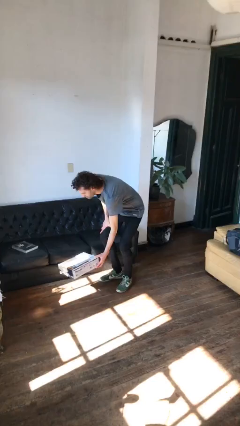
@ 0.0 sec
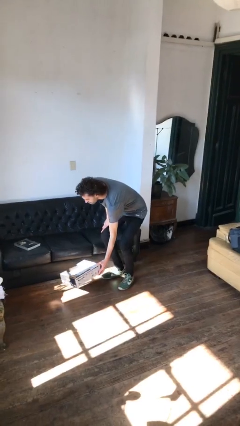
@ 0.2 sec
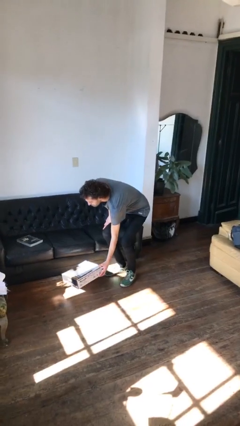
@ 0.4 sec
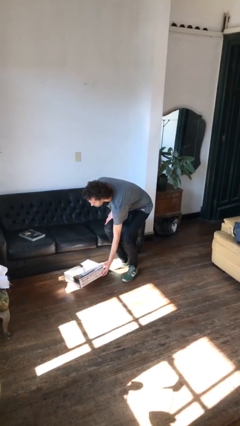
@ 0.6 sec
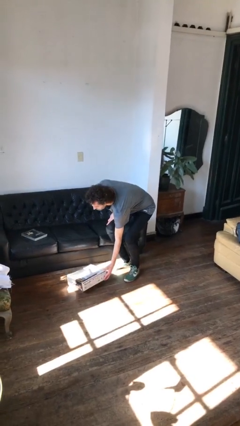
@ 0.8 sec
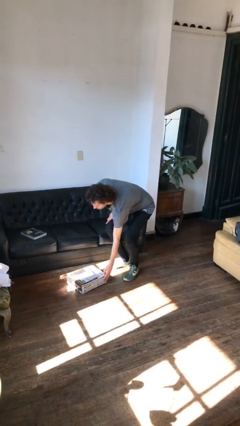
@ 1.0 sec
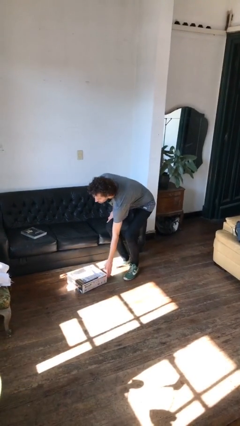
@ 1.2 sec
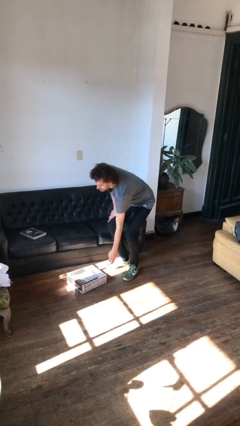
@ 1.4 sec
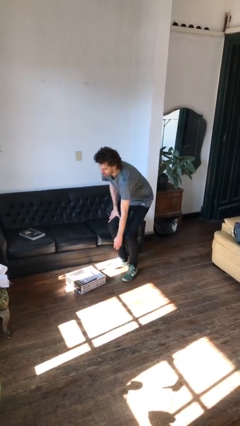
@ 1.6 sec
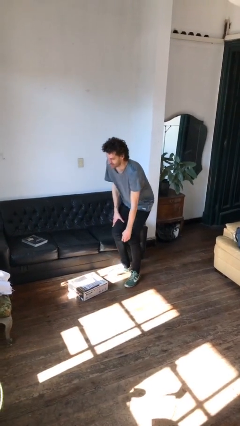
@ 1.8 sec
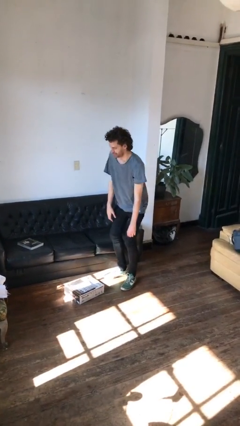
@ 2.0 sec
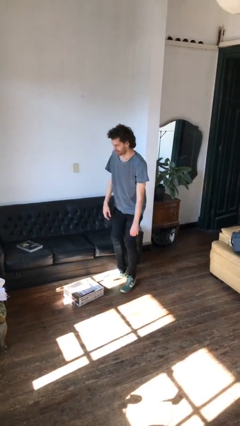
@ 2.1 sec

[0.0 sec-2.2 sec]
person puts down object on floor

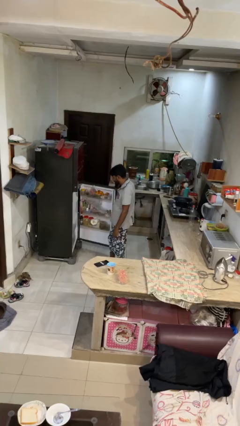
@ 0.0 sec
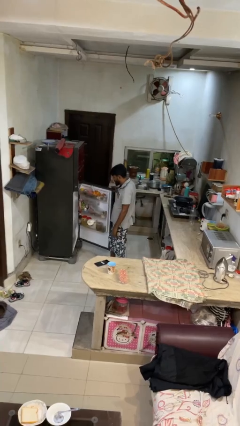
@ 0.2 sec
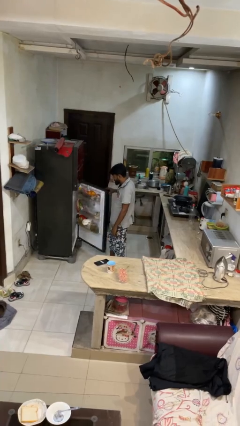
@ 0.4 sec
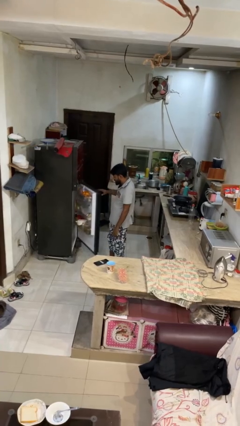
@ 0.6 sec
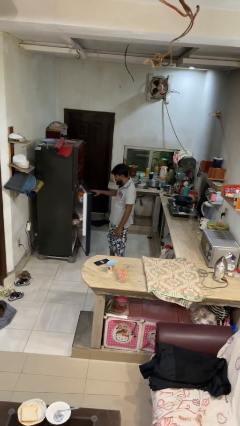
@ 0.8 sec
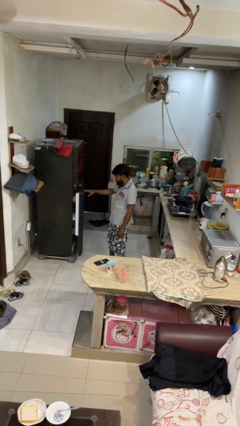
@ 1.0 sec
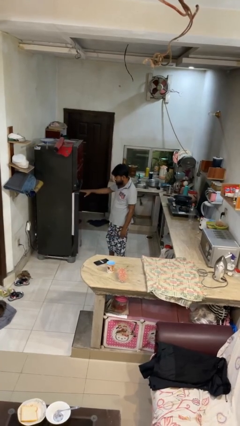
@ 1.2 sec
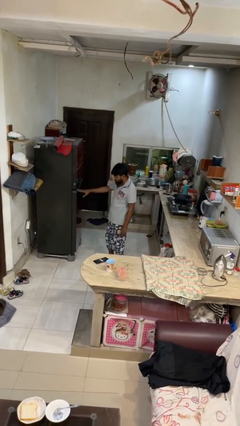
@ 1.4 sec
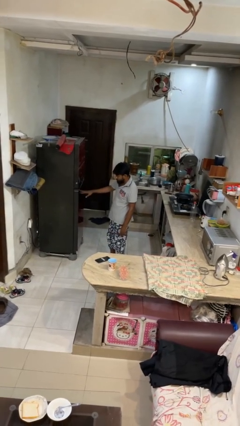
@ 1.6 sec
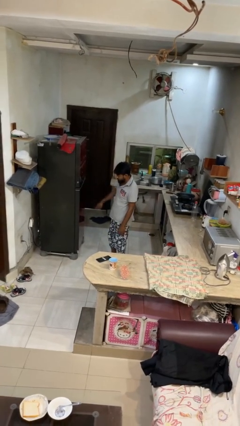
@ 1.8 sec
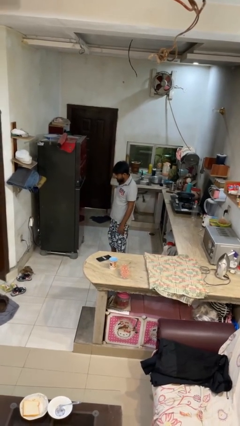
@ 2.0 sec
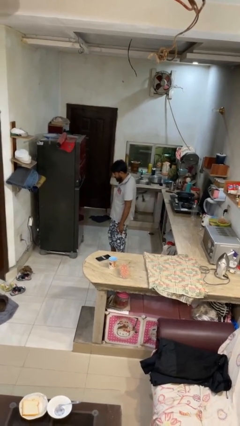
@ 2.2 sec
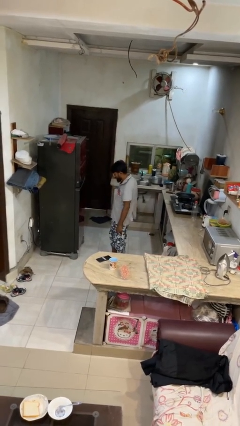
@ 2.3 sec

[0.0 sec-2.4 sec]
person closes refrigerator

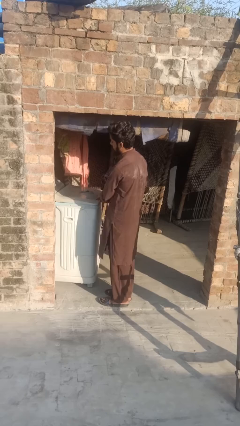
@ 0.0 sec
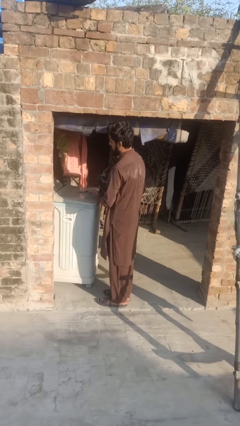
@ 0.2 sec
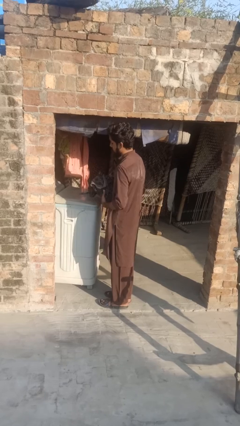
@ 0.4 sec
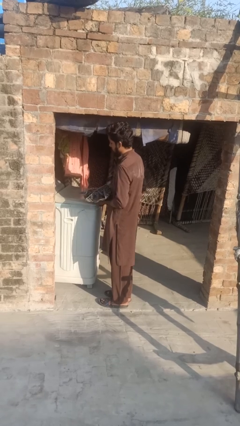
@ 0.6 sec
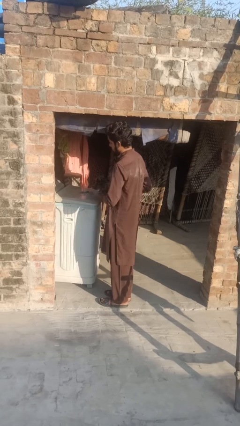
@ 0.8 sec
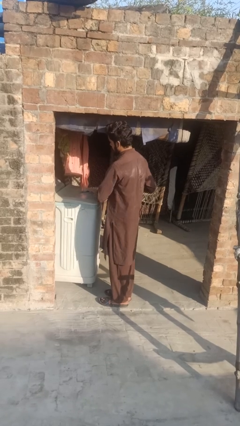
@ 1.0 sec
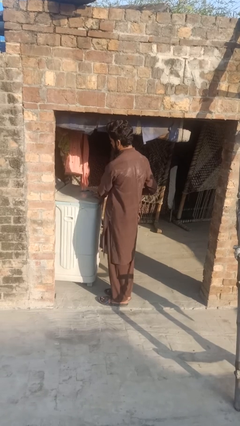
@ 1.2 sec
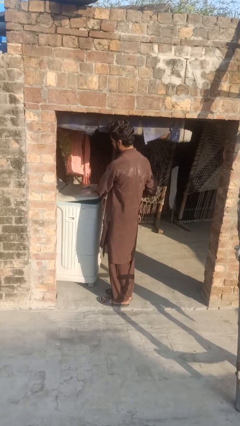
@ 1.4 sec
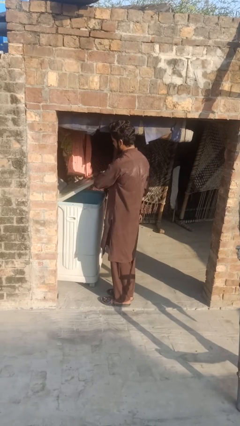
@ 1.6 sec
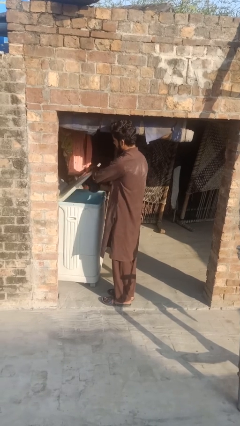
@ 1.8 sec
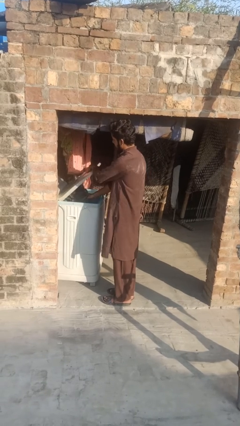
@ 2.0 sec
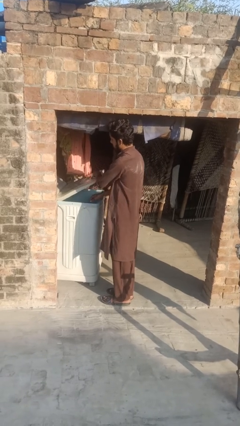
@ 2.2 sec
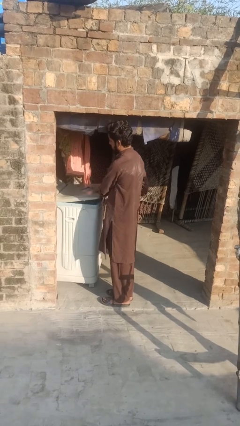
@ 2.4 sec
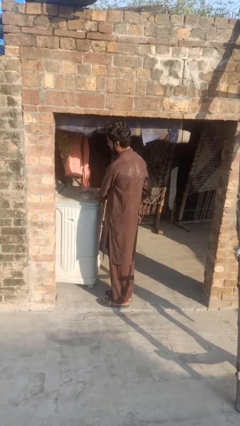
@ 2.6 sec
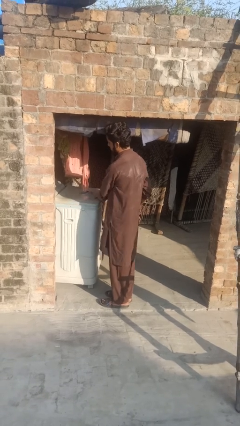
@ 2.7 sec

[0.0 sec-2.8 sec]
person loads dryer

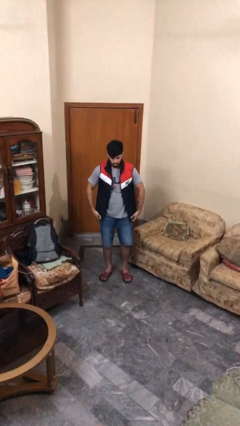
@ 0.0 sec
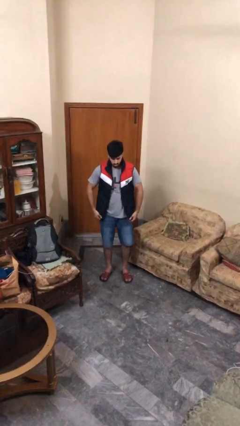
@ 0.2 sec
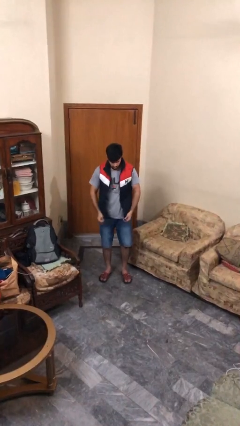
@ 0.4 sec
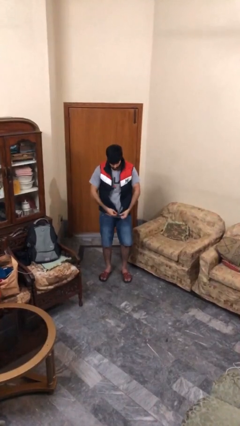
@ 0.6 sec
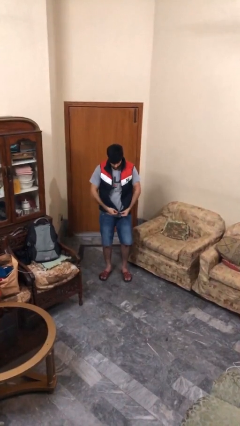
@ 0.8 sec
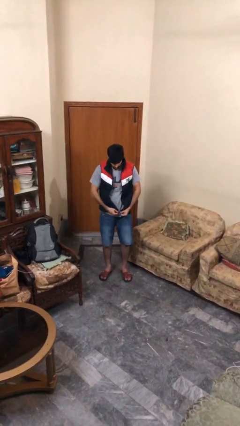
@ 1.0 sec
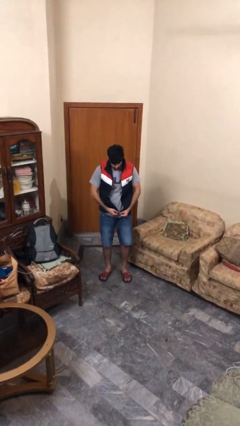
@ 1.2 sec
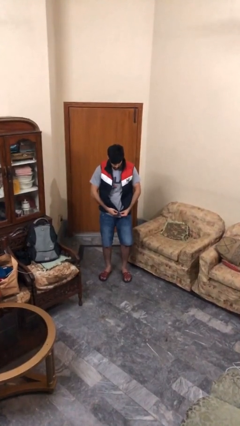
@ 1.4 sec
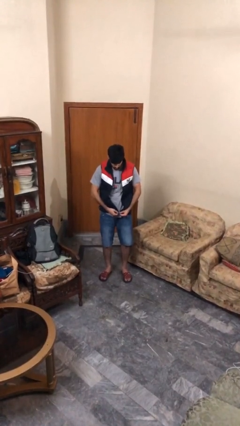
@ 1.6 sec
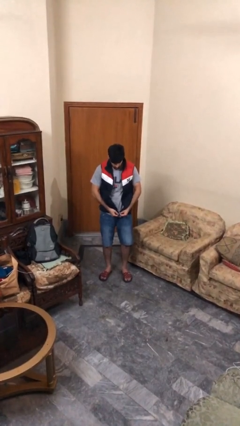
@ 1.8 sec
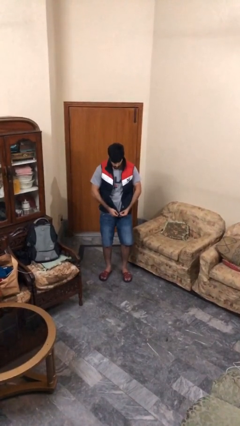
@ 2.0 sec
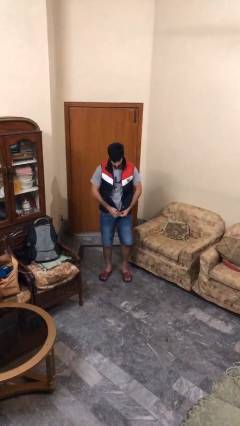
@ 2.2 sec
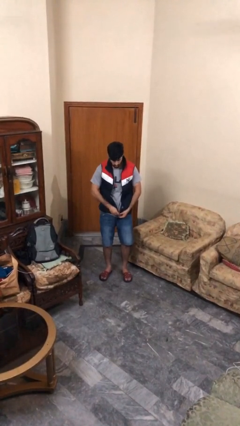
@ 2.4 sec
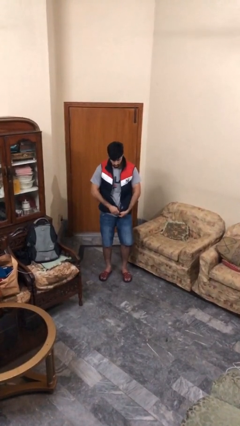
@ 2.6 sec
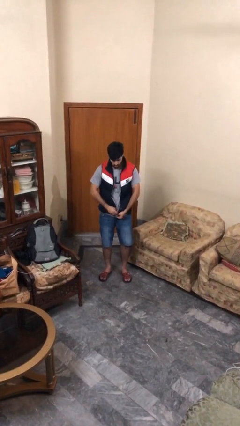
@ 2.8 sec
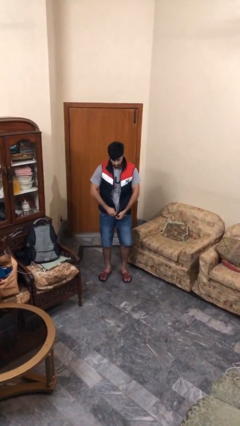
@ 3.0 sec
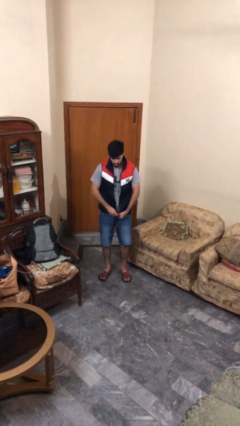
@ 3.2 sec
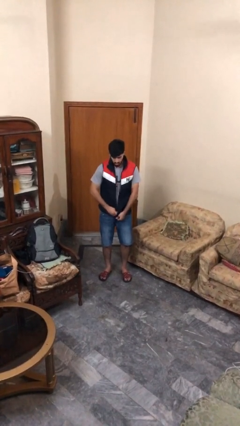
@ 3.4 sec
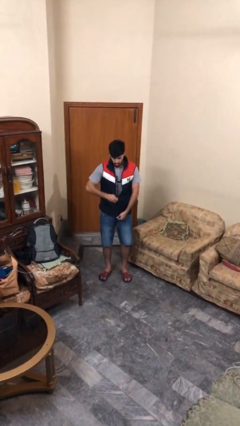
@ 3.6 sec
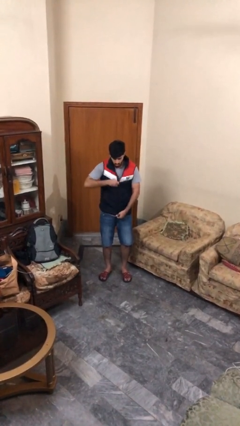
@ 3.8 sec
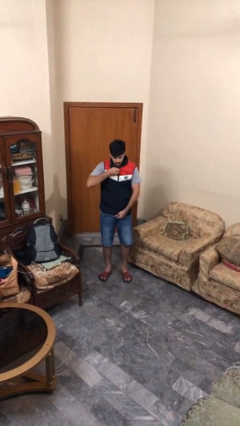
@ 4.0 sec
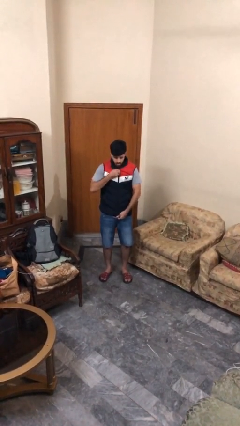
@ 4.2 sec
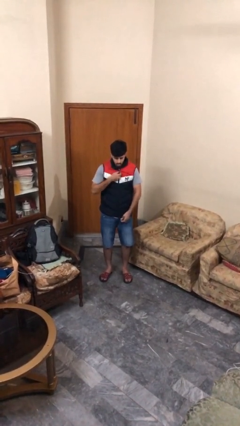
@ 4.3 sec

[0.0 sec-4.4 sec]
person zips up jacket

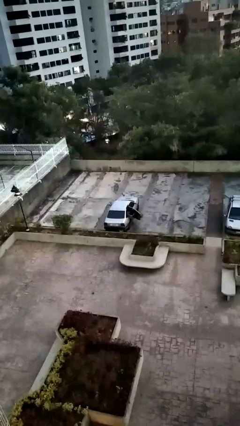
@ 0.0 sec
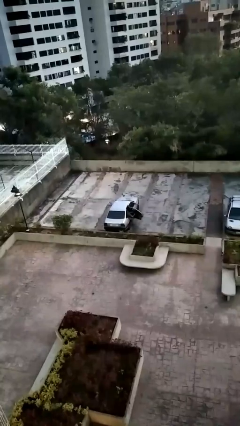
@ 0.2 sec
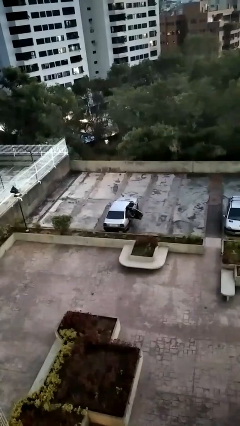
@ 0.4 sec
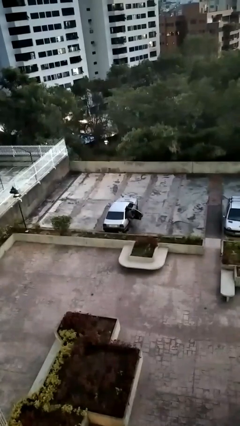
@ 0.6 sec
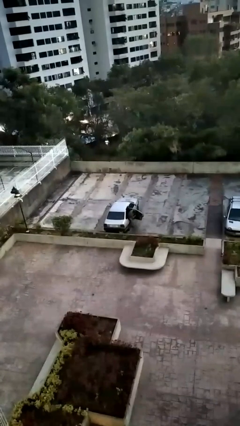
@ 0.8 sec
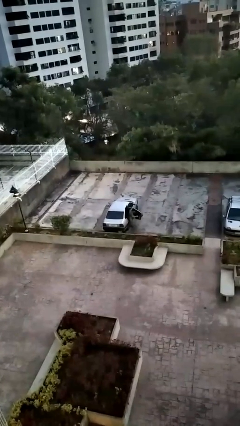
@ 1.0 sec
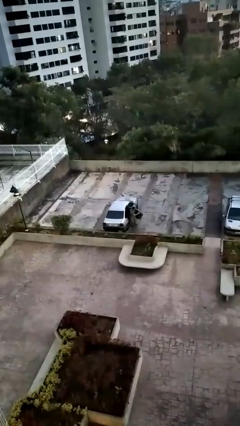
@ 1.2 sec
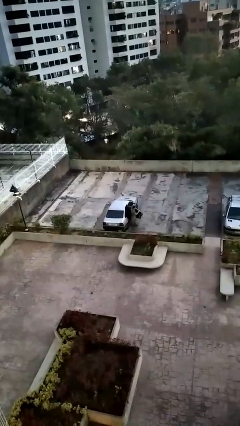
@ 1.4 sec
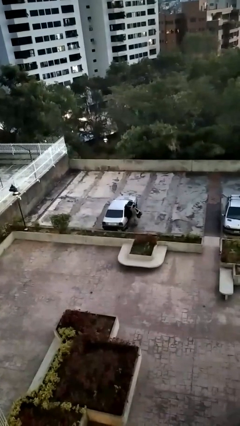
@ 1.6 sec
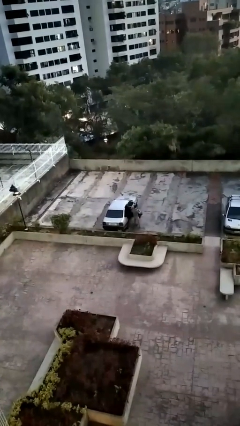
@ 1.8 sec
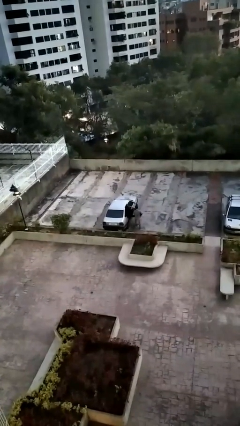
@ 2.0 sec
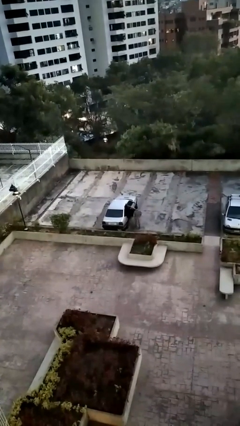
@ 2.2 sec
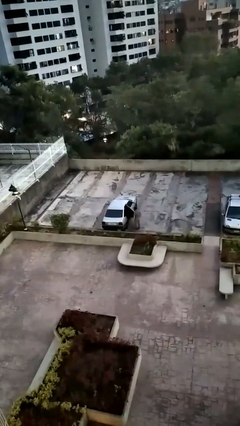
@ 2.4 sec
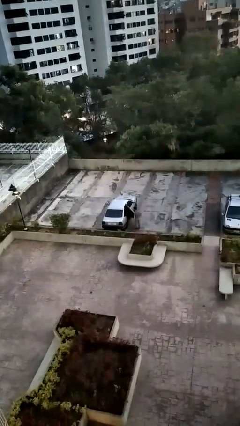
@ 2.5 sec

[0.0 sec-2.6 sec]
car drops off person

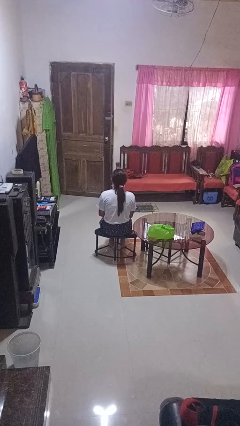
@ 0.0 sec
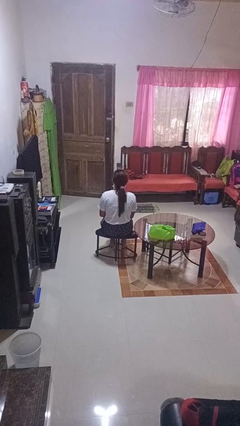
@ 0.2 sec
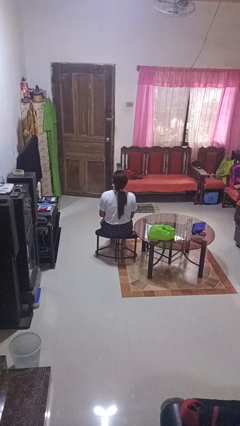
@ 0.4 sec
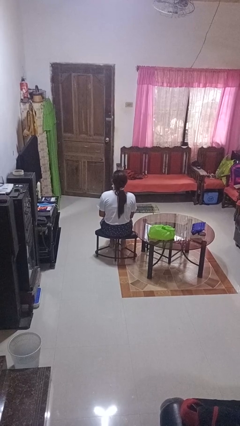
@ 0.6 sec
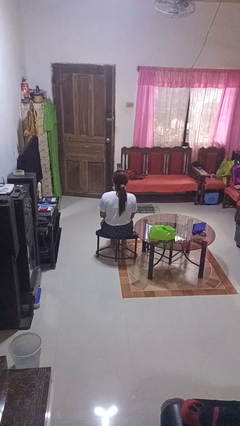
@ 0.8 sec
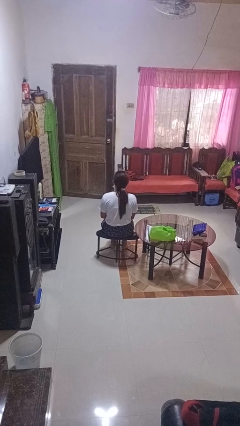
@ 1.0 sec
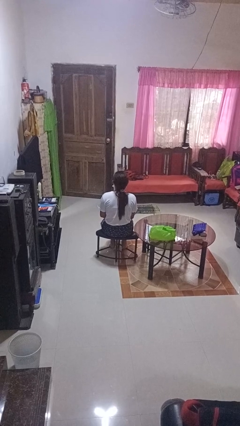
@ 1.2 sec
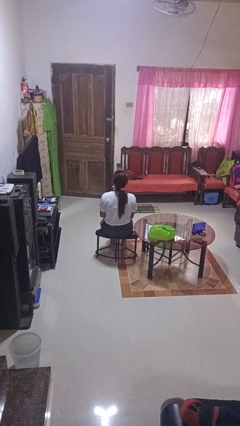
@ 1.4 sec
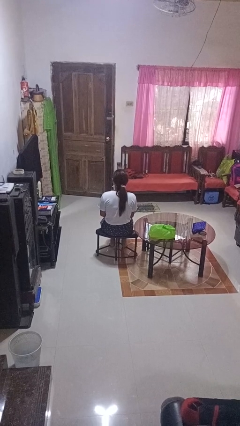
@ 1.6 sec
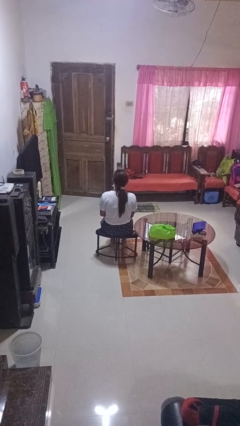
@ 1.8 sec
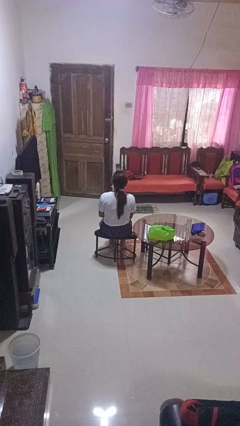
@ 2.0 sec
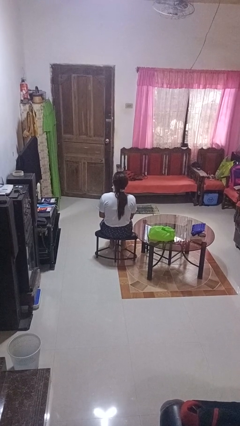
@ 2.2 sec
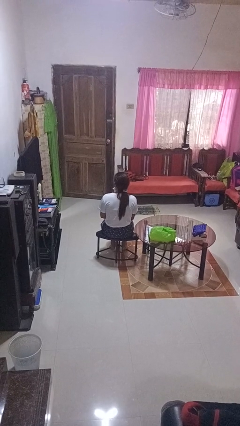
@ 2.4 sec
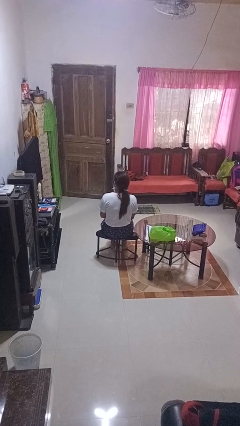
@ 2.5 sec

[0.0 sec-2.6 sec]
person nods head

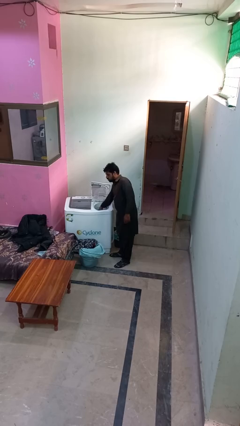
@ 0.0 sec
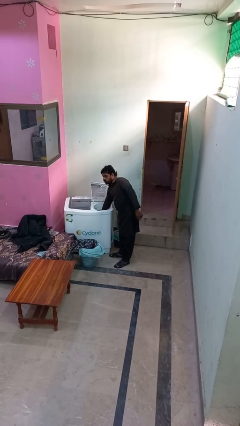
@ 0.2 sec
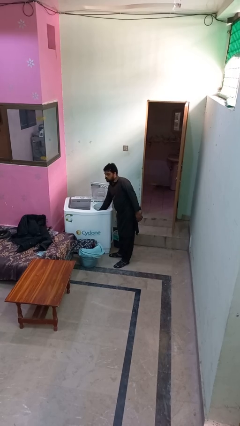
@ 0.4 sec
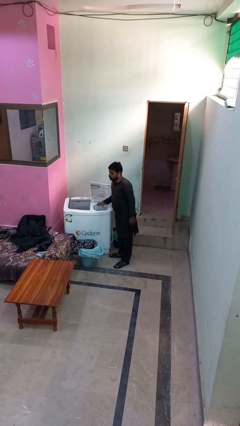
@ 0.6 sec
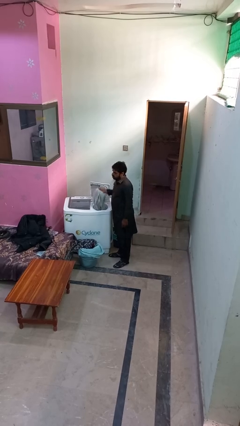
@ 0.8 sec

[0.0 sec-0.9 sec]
person unloads dryer
